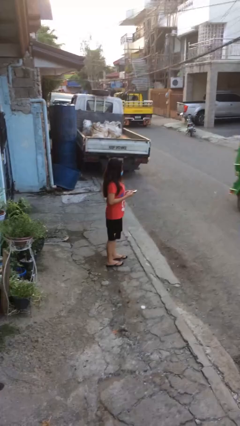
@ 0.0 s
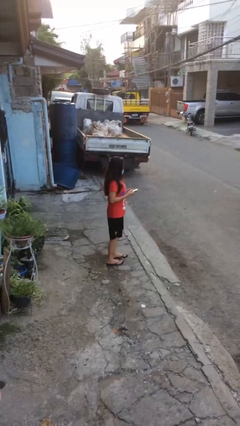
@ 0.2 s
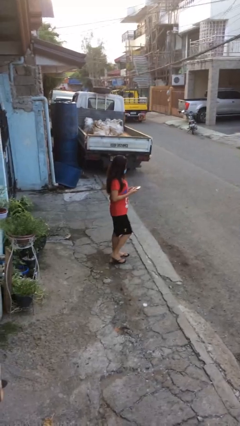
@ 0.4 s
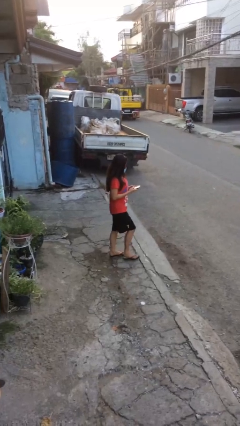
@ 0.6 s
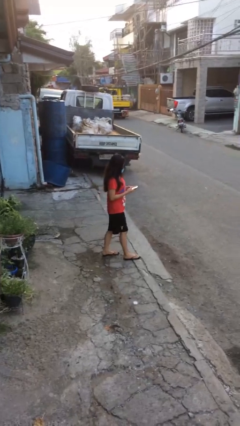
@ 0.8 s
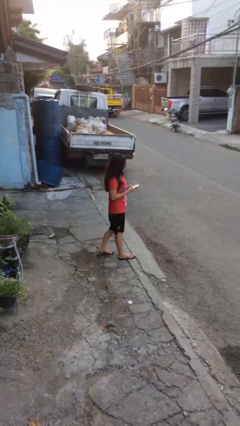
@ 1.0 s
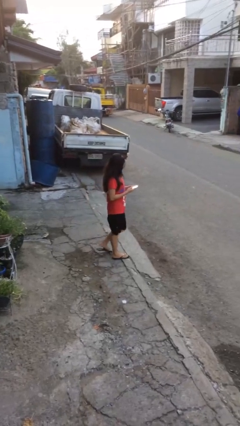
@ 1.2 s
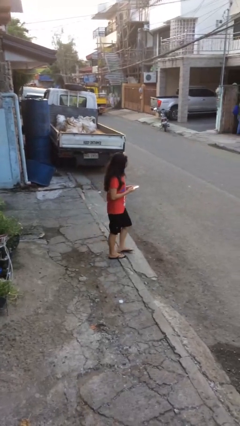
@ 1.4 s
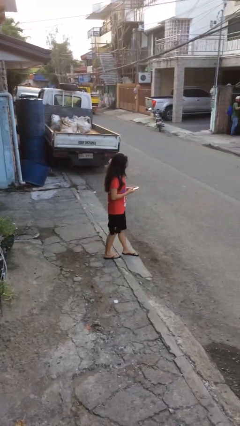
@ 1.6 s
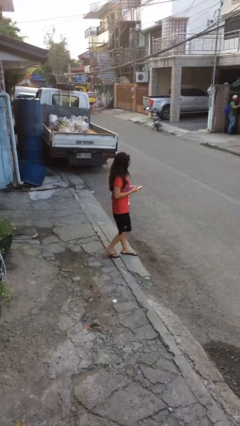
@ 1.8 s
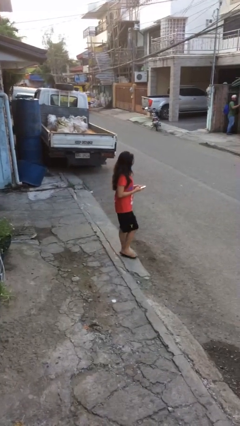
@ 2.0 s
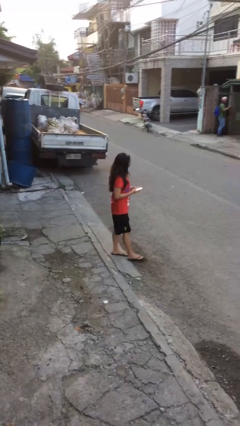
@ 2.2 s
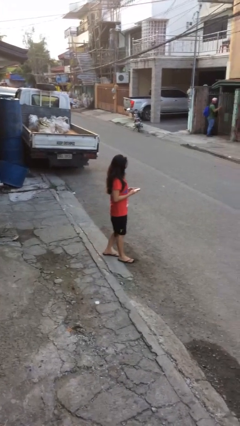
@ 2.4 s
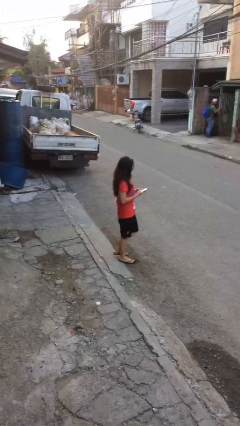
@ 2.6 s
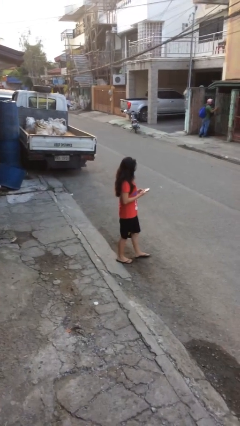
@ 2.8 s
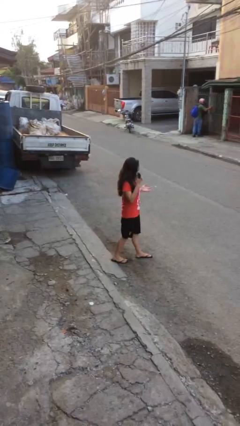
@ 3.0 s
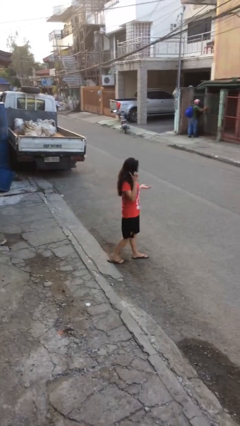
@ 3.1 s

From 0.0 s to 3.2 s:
person texts on phone

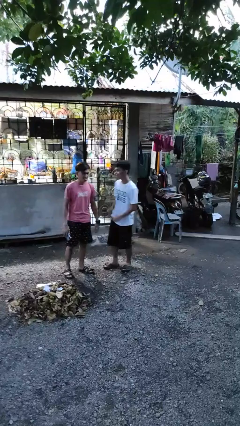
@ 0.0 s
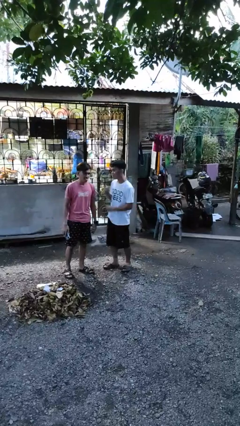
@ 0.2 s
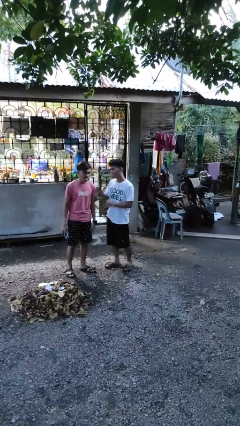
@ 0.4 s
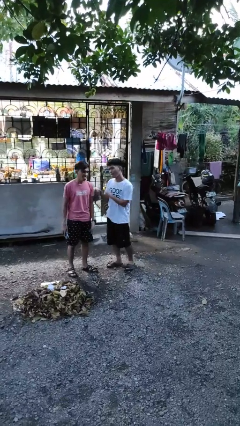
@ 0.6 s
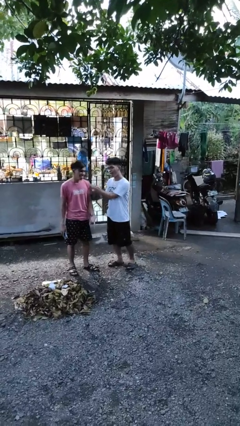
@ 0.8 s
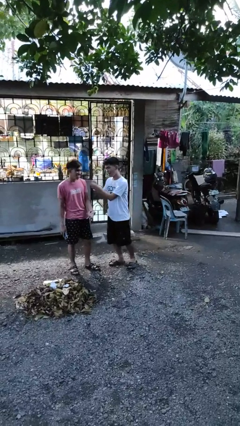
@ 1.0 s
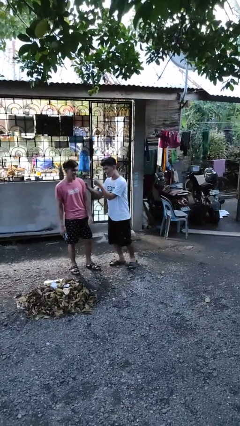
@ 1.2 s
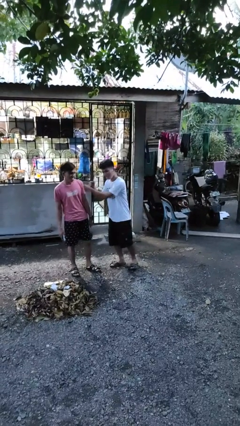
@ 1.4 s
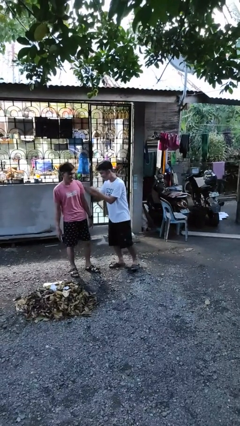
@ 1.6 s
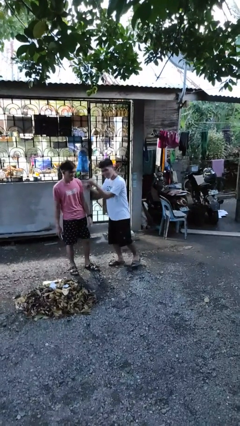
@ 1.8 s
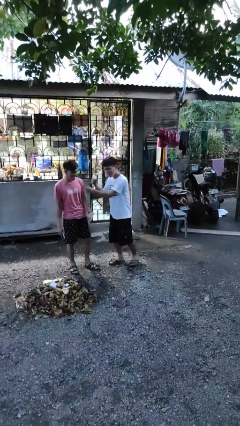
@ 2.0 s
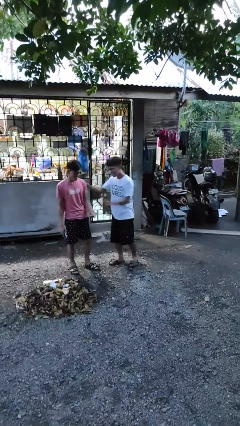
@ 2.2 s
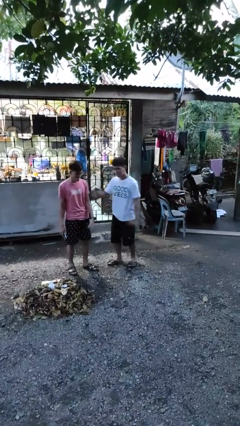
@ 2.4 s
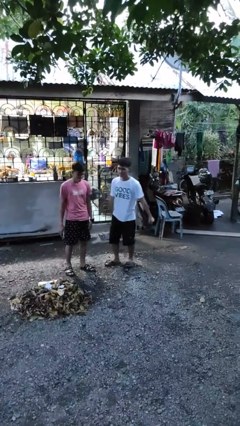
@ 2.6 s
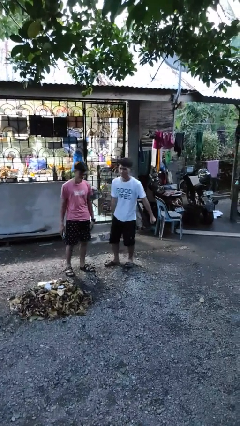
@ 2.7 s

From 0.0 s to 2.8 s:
person pounds shoulders of person

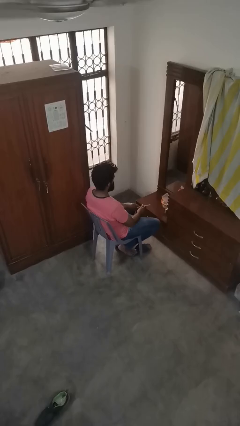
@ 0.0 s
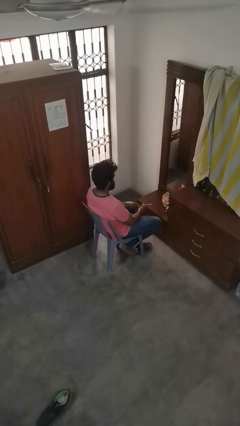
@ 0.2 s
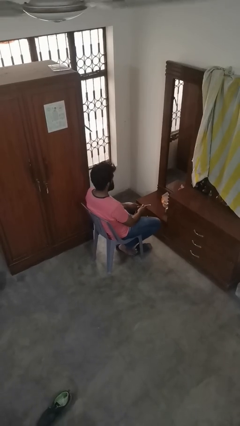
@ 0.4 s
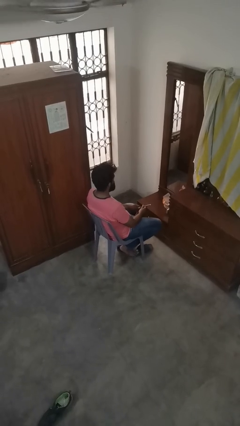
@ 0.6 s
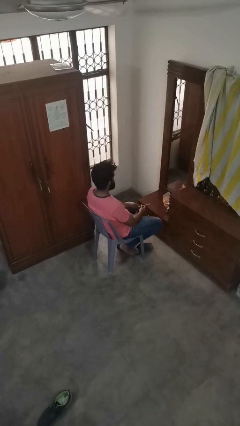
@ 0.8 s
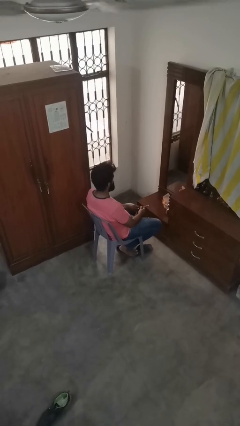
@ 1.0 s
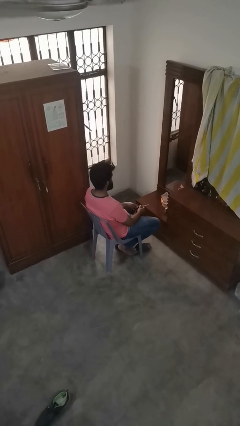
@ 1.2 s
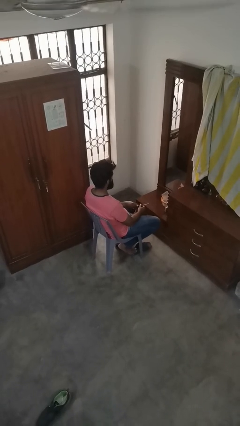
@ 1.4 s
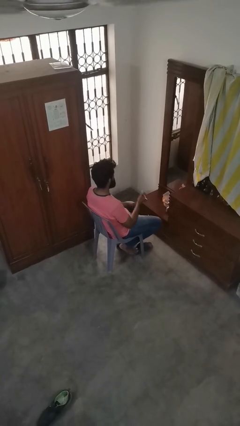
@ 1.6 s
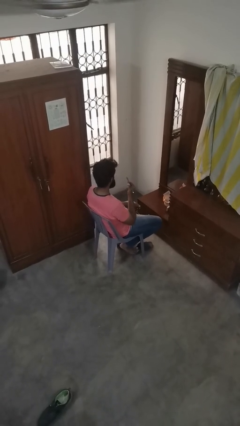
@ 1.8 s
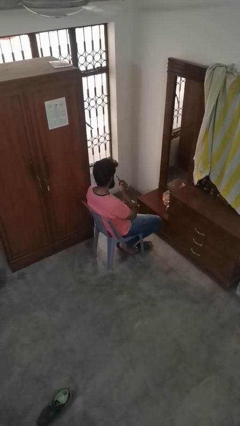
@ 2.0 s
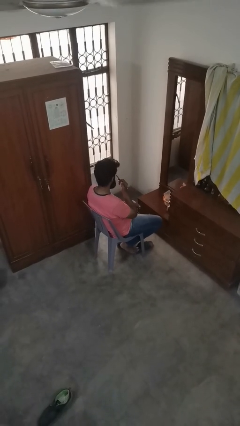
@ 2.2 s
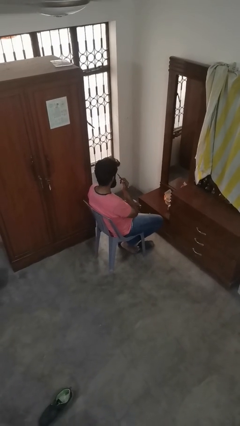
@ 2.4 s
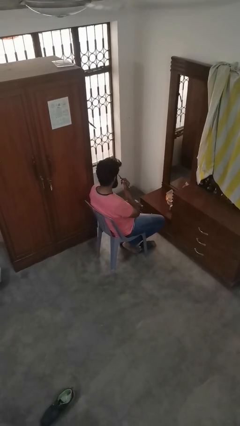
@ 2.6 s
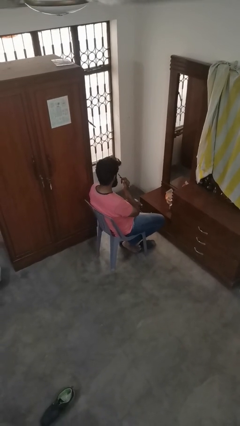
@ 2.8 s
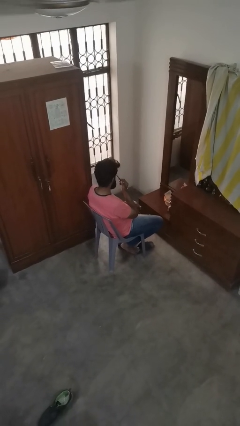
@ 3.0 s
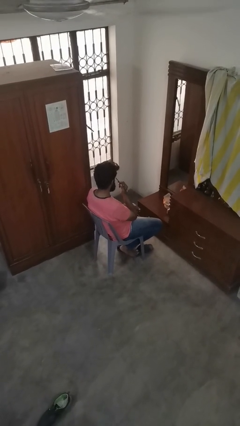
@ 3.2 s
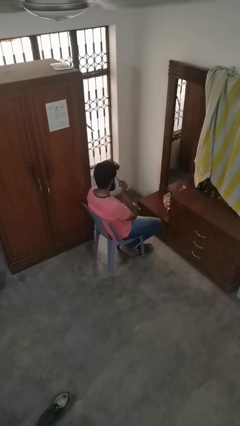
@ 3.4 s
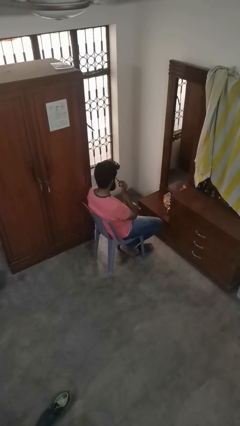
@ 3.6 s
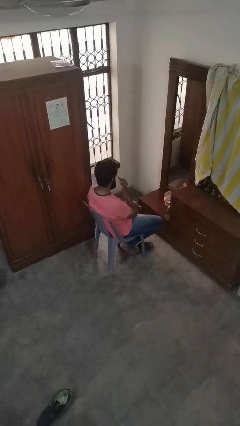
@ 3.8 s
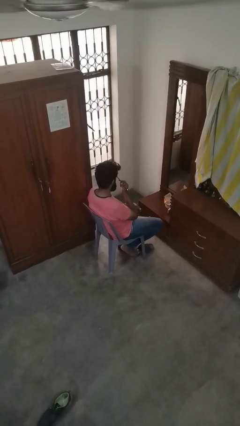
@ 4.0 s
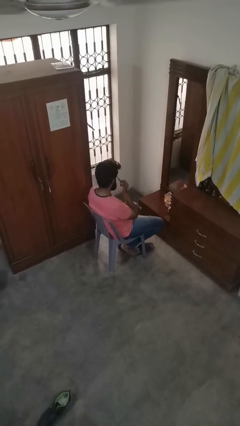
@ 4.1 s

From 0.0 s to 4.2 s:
person applies eye makeup

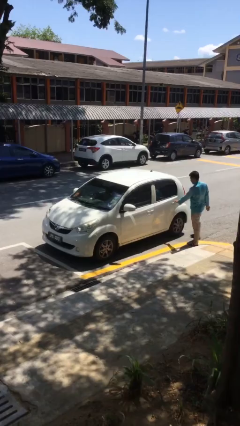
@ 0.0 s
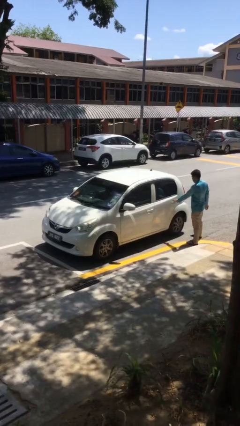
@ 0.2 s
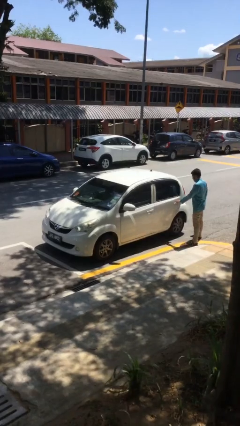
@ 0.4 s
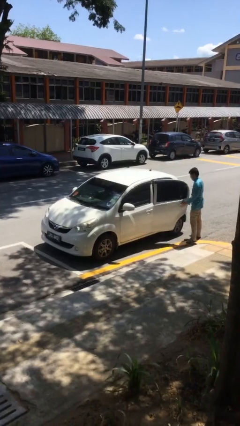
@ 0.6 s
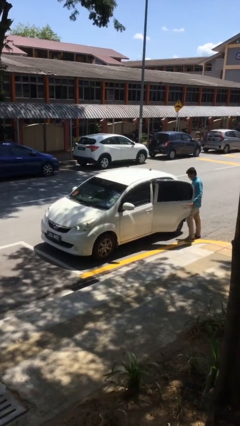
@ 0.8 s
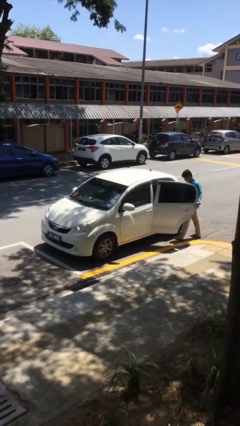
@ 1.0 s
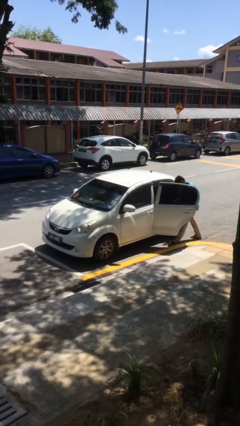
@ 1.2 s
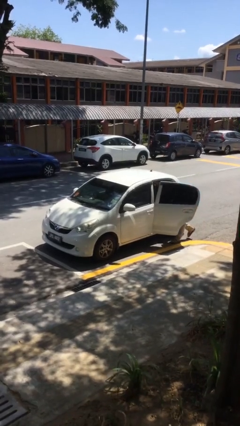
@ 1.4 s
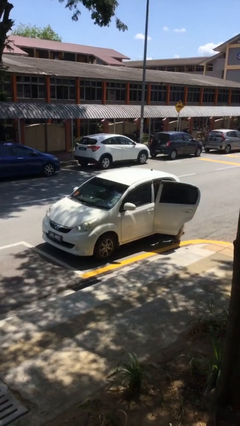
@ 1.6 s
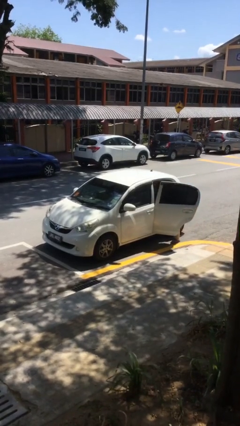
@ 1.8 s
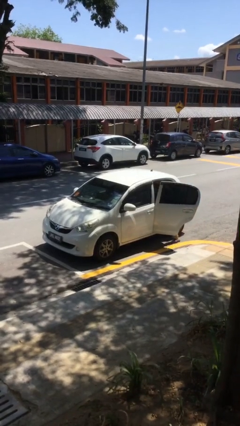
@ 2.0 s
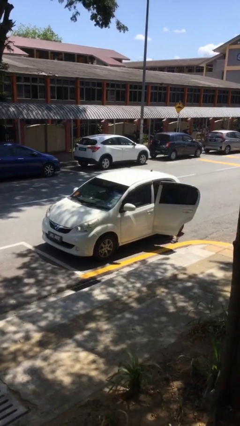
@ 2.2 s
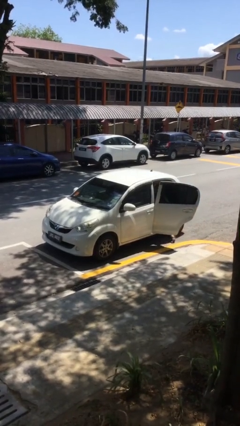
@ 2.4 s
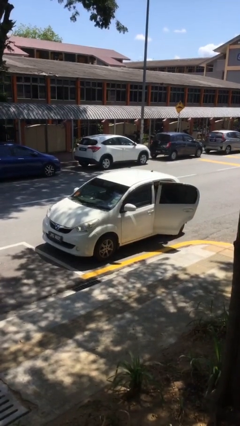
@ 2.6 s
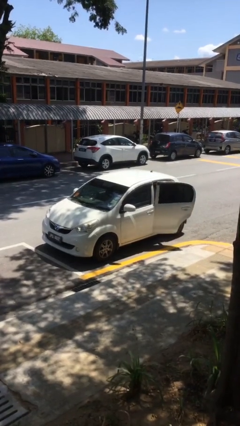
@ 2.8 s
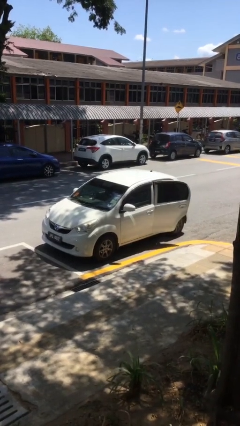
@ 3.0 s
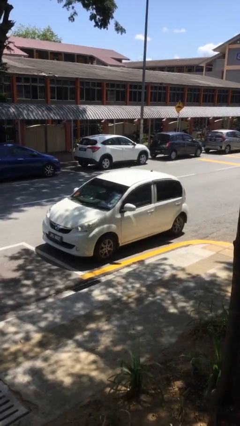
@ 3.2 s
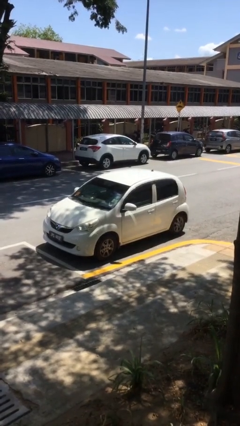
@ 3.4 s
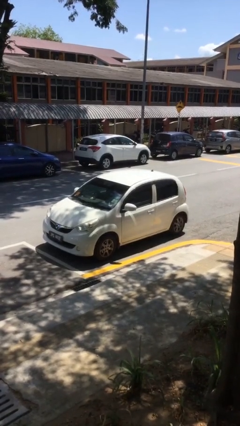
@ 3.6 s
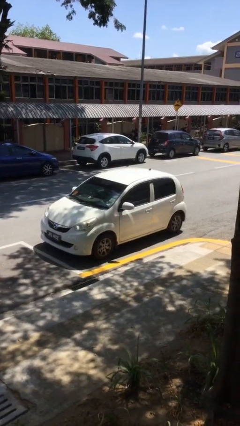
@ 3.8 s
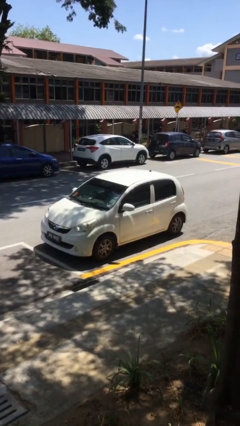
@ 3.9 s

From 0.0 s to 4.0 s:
car picks up person

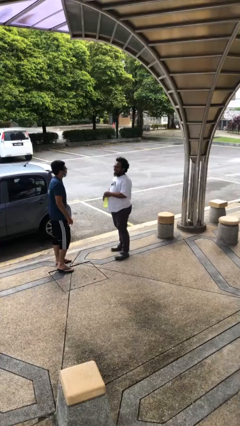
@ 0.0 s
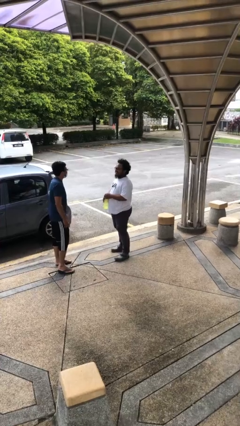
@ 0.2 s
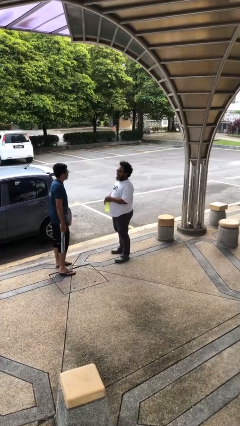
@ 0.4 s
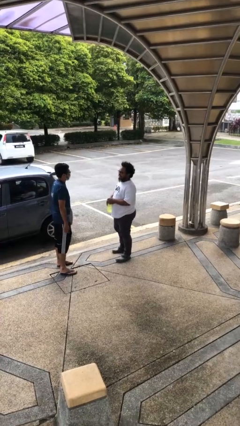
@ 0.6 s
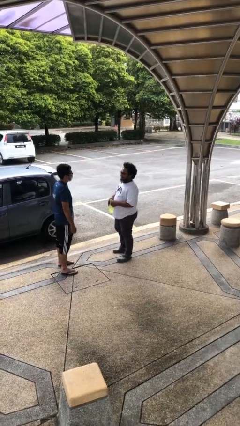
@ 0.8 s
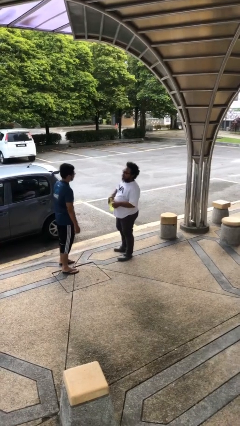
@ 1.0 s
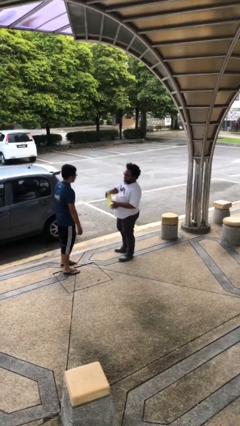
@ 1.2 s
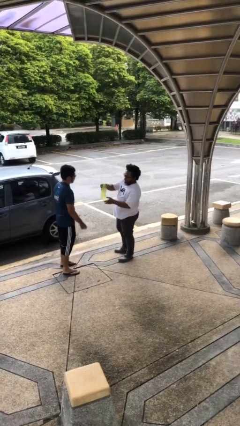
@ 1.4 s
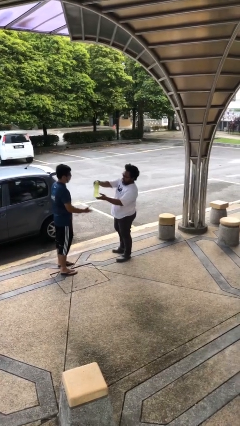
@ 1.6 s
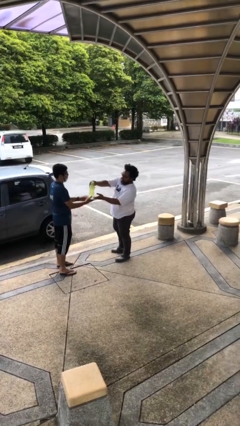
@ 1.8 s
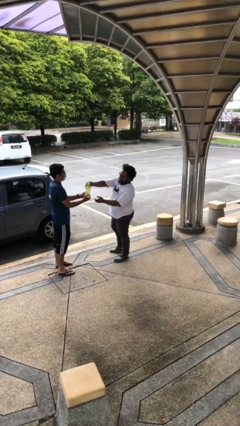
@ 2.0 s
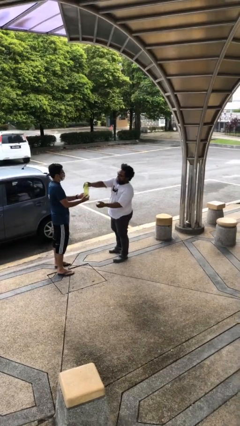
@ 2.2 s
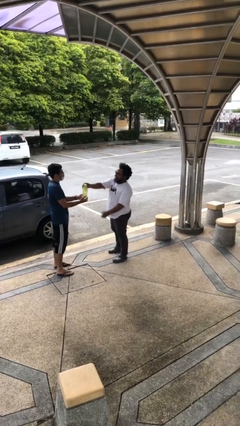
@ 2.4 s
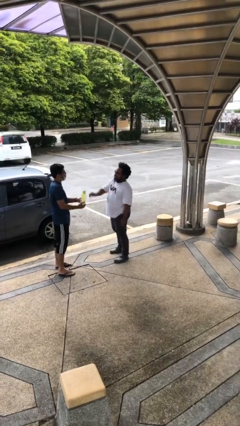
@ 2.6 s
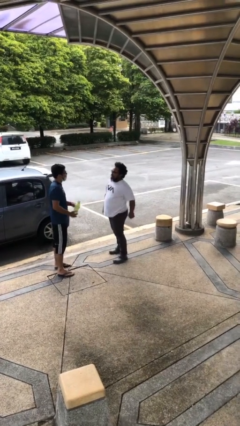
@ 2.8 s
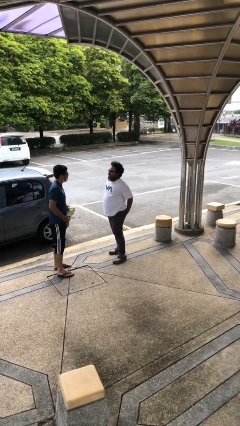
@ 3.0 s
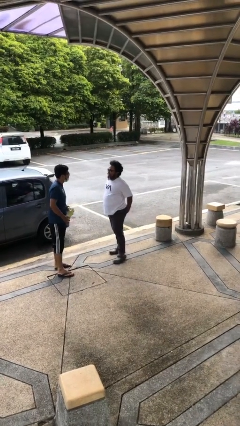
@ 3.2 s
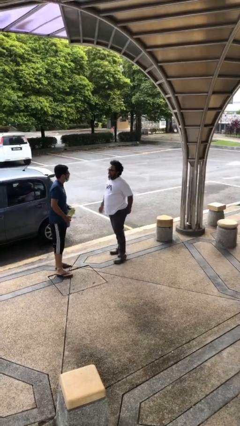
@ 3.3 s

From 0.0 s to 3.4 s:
person transfers object to person
